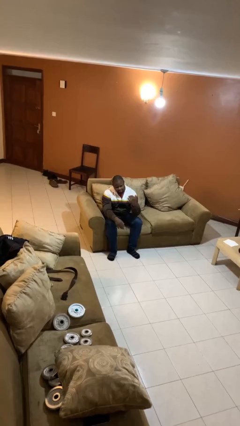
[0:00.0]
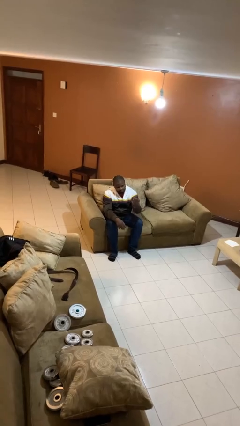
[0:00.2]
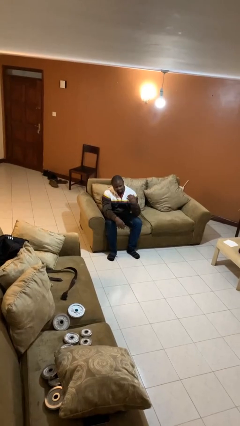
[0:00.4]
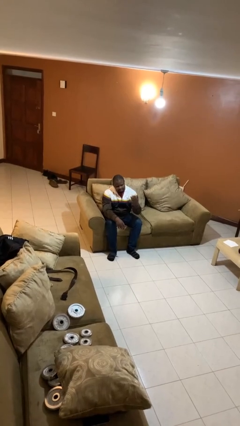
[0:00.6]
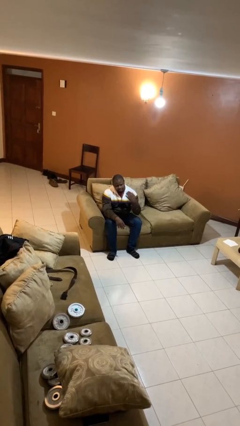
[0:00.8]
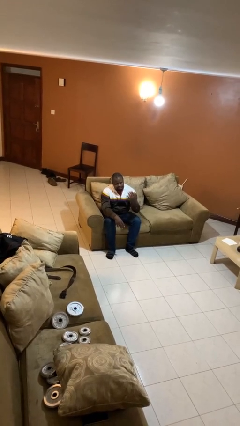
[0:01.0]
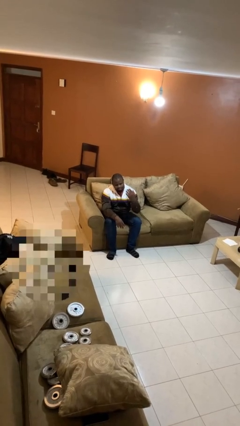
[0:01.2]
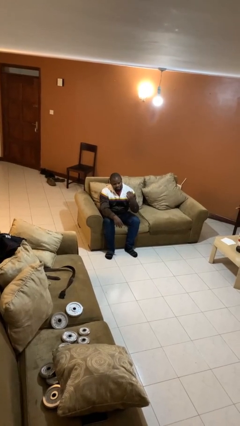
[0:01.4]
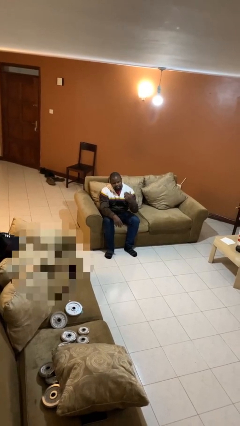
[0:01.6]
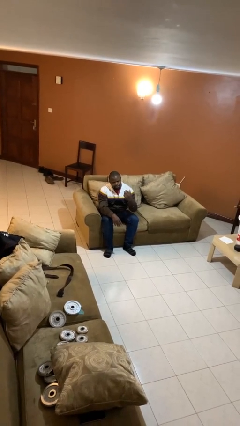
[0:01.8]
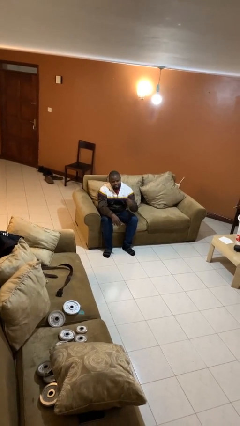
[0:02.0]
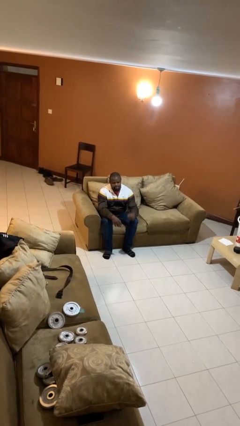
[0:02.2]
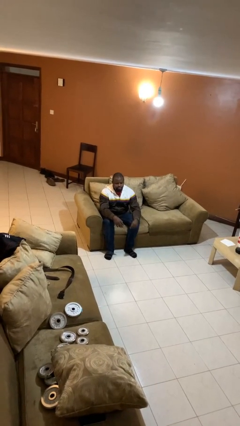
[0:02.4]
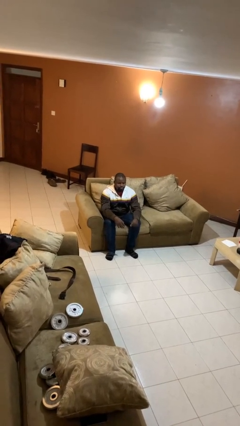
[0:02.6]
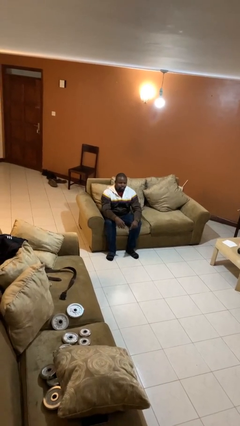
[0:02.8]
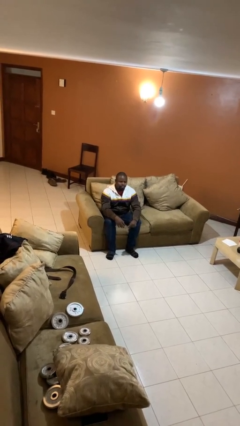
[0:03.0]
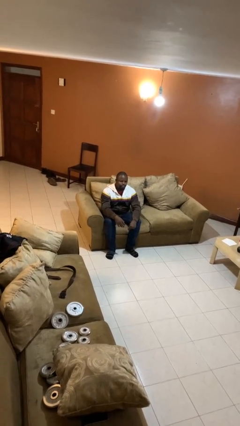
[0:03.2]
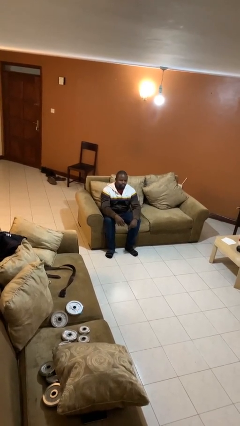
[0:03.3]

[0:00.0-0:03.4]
person gestures come here

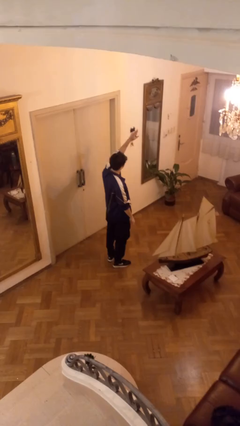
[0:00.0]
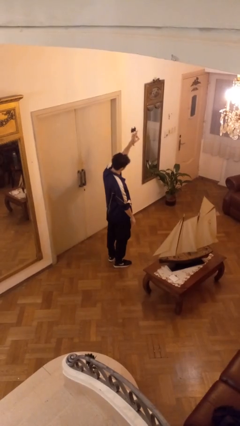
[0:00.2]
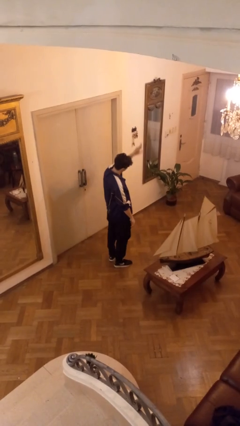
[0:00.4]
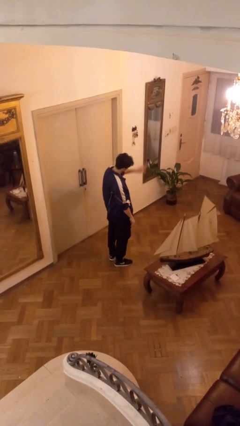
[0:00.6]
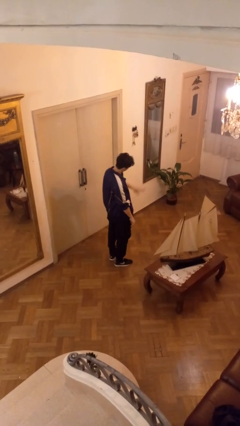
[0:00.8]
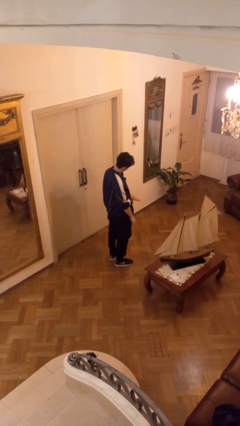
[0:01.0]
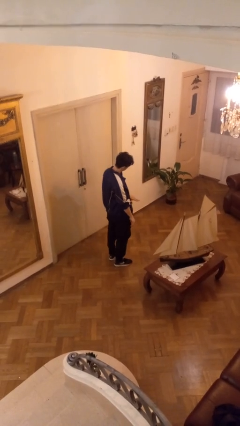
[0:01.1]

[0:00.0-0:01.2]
person gestures swipe down

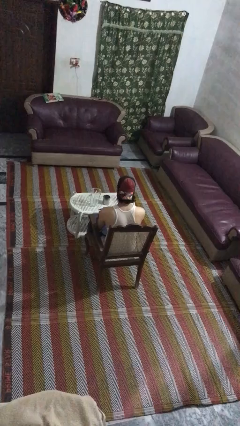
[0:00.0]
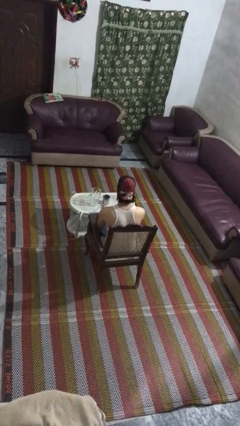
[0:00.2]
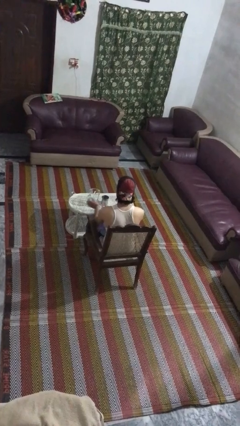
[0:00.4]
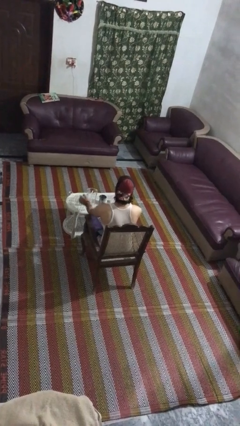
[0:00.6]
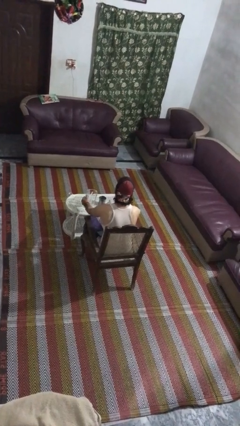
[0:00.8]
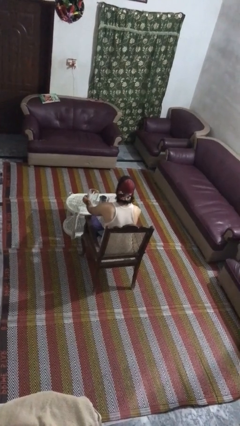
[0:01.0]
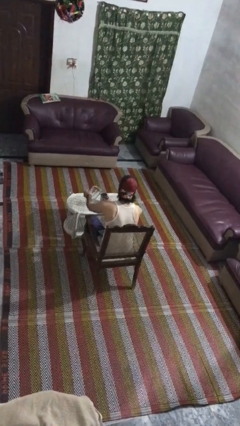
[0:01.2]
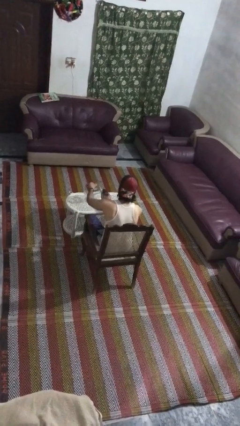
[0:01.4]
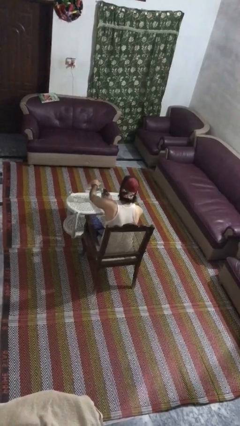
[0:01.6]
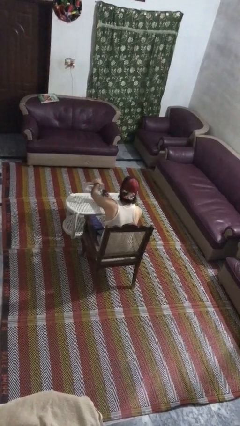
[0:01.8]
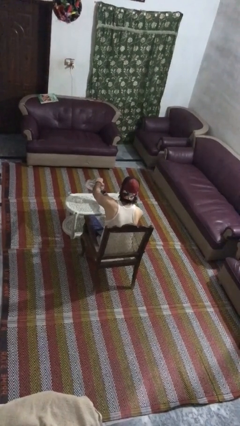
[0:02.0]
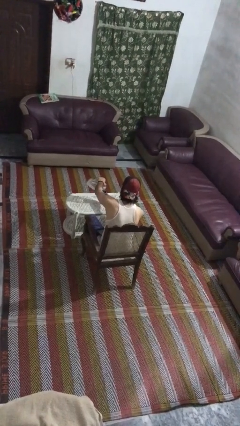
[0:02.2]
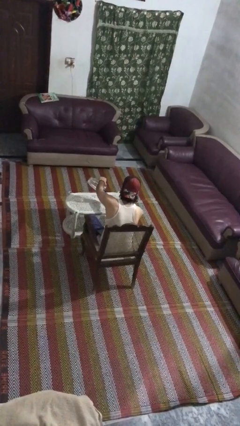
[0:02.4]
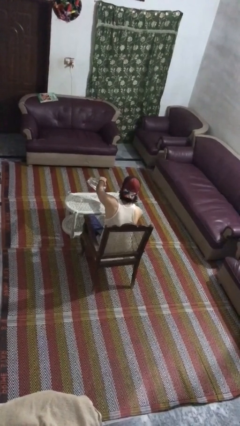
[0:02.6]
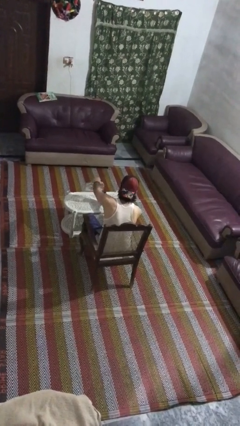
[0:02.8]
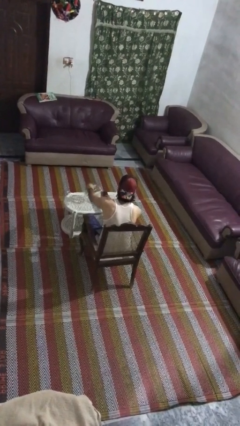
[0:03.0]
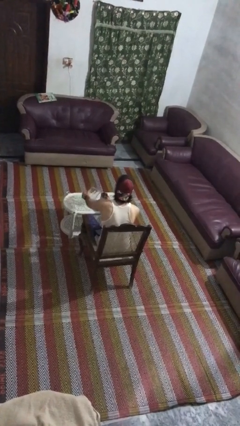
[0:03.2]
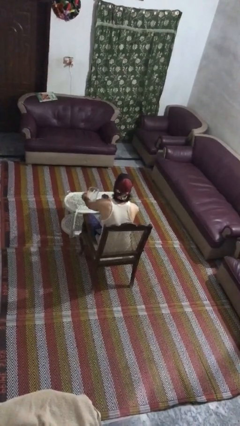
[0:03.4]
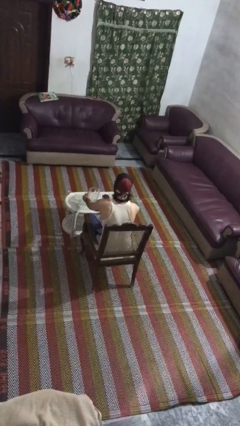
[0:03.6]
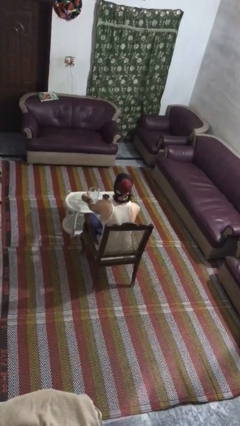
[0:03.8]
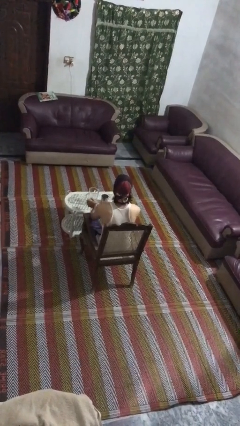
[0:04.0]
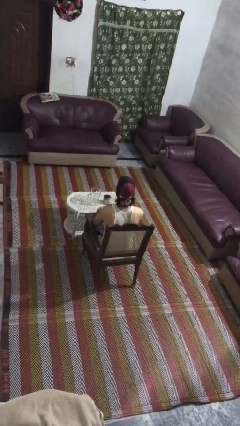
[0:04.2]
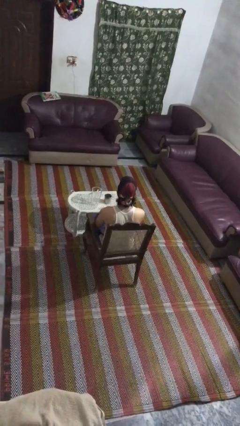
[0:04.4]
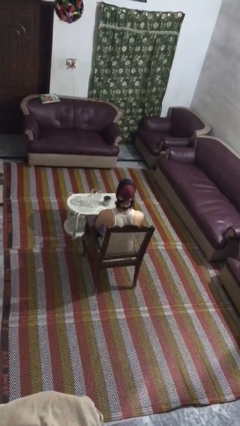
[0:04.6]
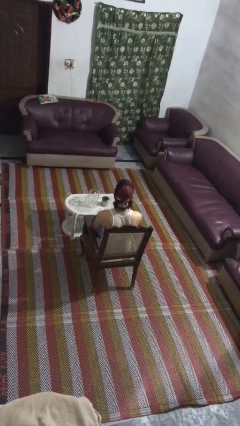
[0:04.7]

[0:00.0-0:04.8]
person pours coffee into mug

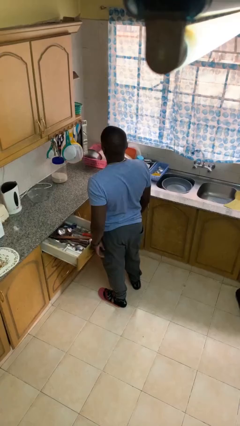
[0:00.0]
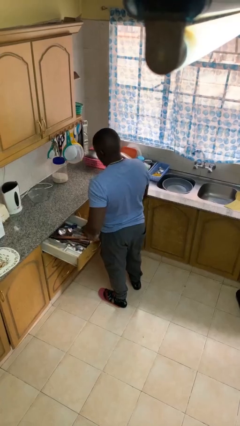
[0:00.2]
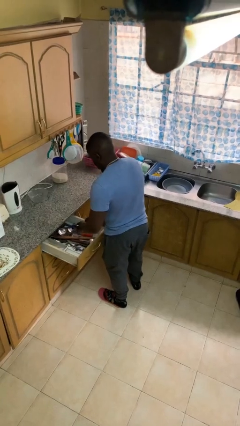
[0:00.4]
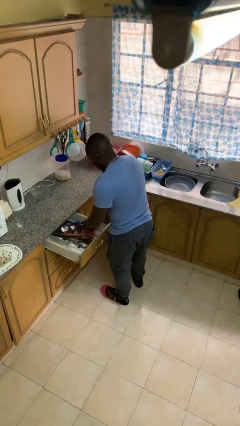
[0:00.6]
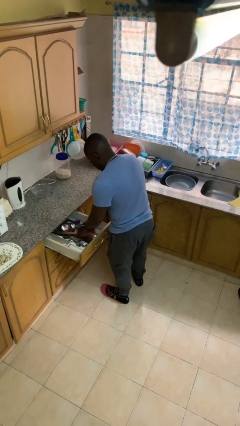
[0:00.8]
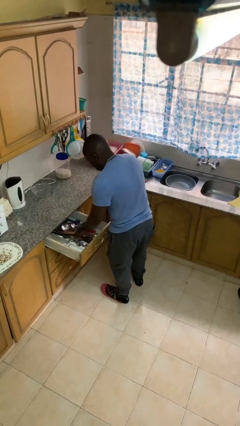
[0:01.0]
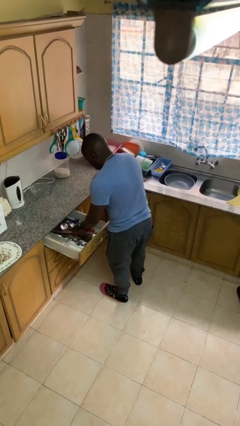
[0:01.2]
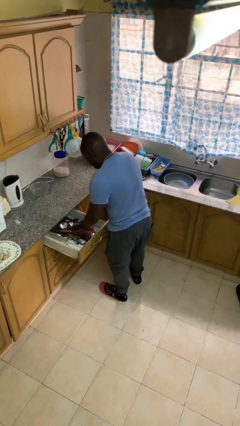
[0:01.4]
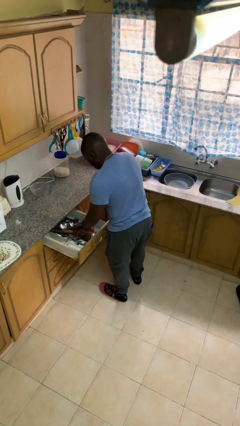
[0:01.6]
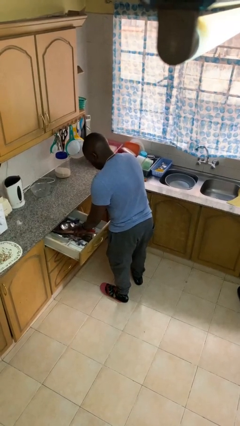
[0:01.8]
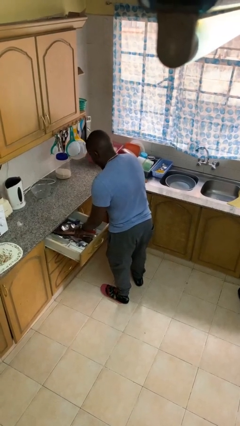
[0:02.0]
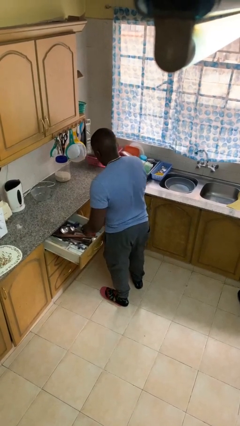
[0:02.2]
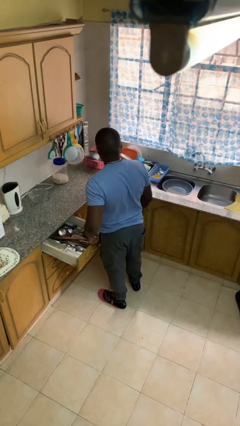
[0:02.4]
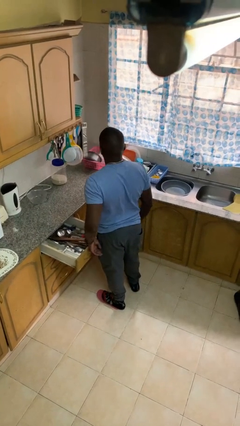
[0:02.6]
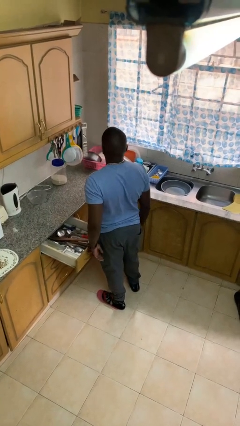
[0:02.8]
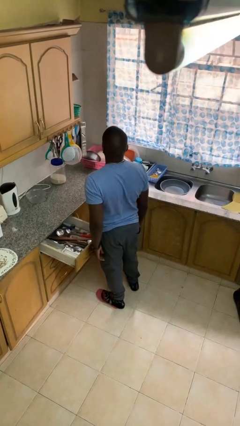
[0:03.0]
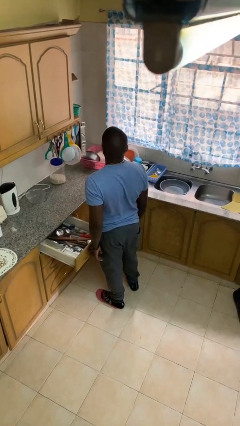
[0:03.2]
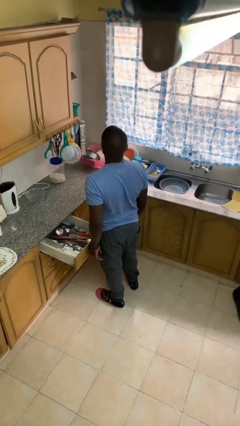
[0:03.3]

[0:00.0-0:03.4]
person searches in kitchen drawer

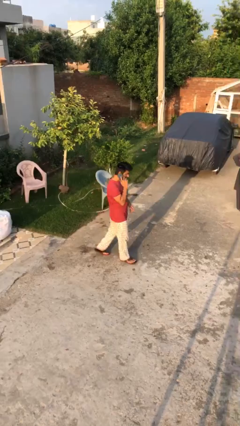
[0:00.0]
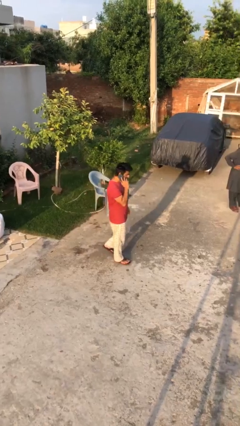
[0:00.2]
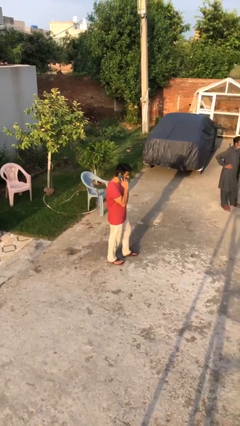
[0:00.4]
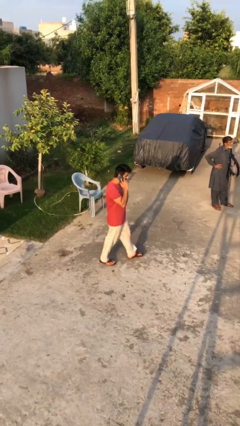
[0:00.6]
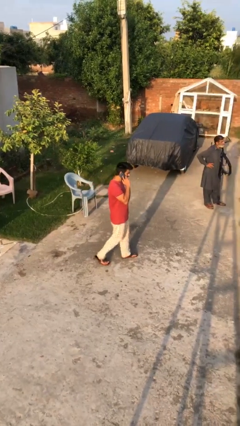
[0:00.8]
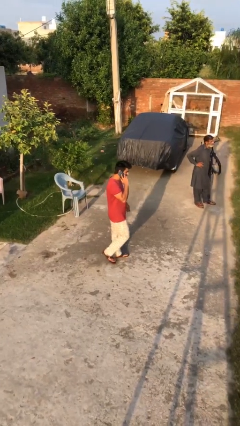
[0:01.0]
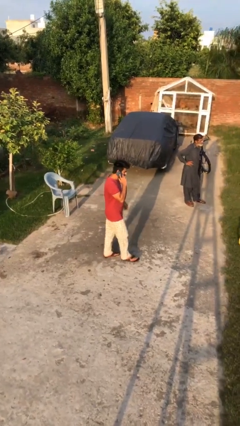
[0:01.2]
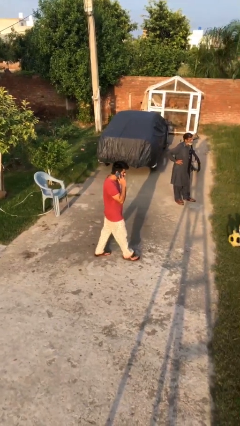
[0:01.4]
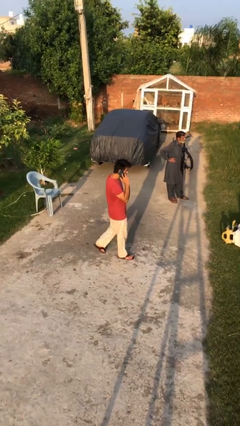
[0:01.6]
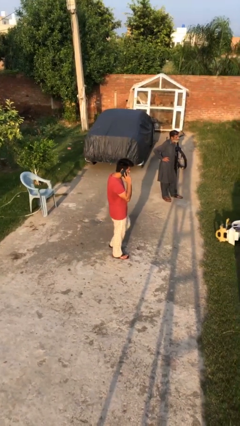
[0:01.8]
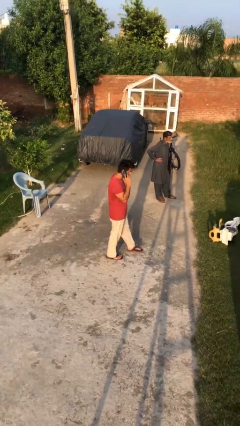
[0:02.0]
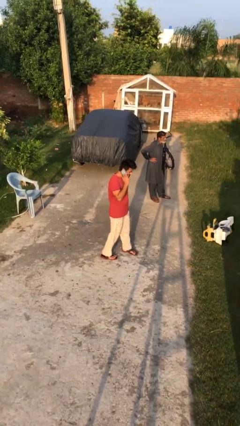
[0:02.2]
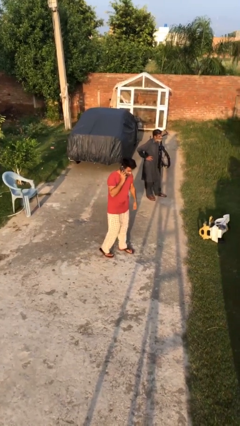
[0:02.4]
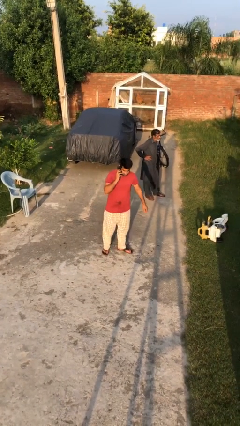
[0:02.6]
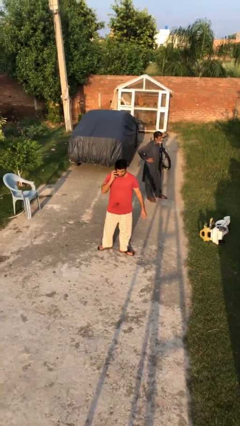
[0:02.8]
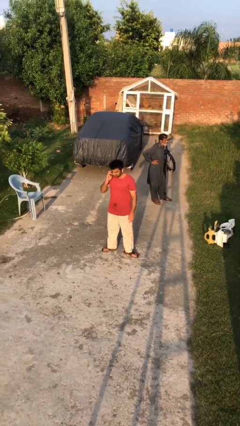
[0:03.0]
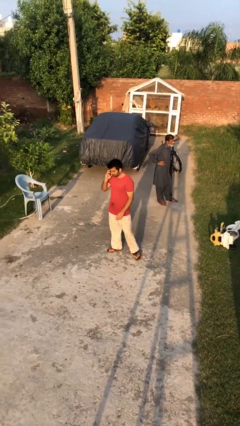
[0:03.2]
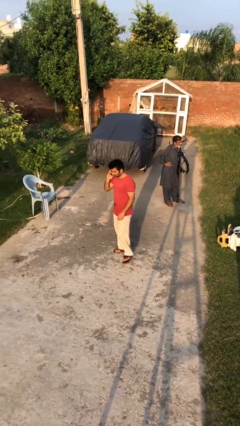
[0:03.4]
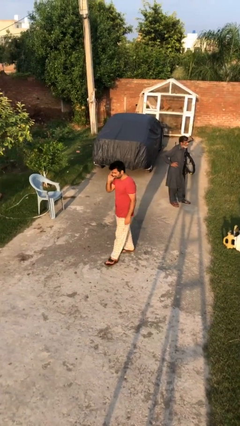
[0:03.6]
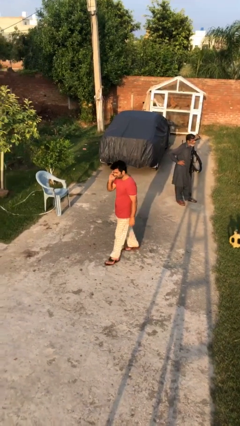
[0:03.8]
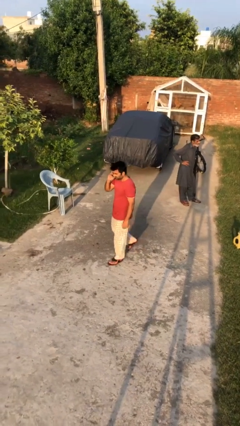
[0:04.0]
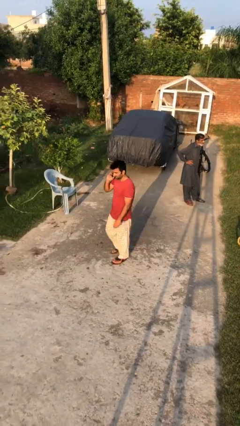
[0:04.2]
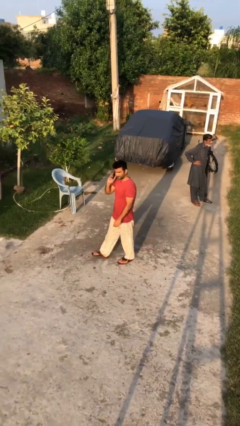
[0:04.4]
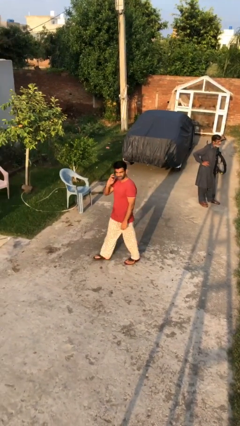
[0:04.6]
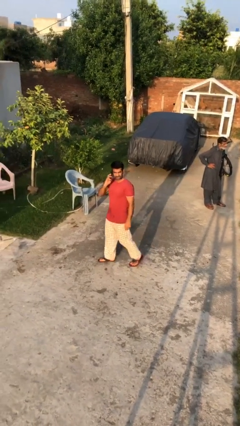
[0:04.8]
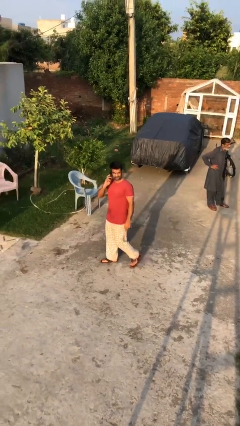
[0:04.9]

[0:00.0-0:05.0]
person talks on phone

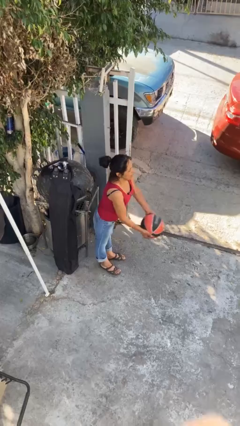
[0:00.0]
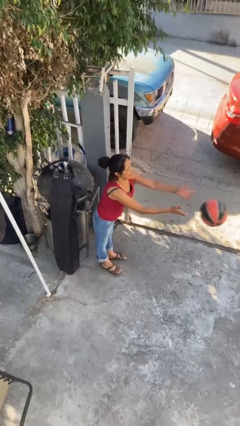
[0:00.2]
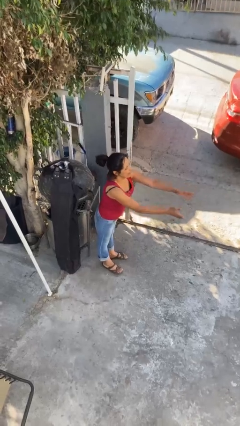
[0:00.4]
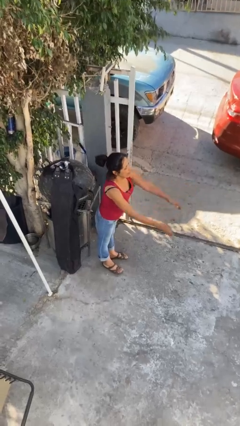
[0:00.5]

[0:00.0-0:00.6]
person throws object to person
